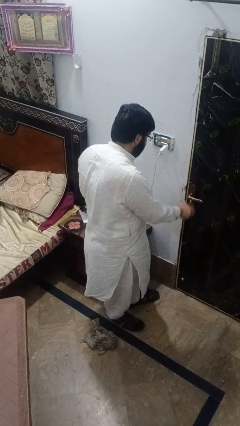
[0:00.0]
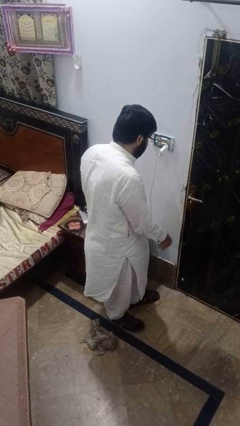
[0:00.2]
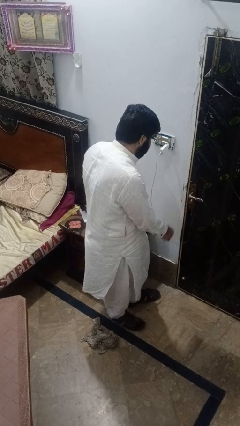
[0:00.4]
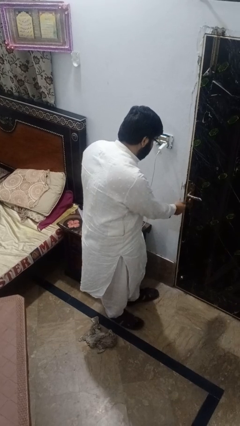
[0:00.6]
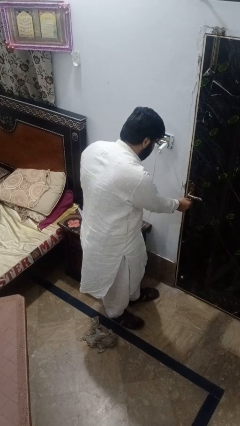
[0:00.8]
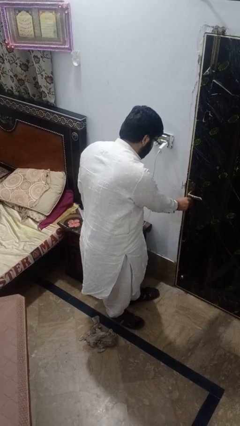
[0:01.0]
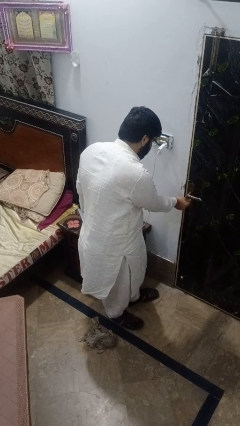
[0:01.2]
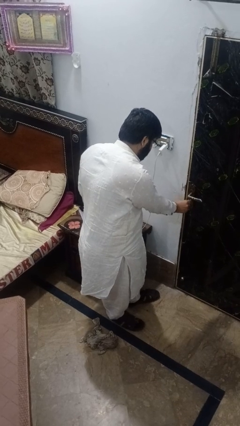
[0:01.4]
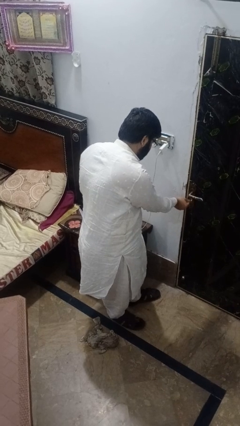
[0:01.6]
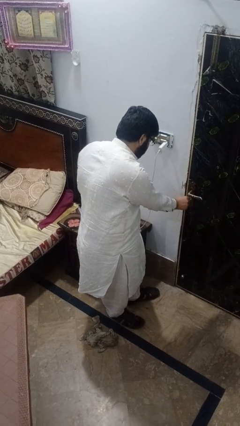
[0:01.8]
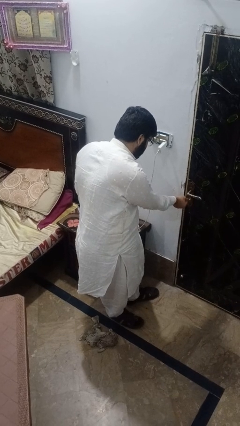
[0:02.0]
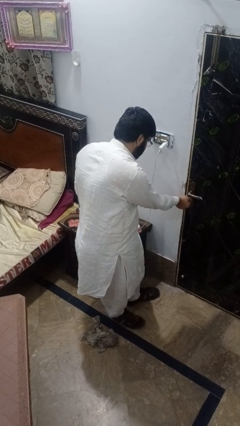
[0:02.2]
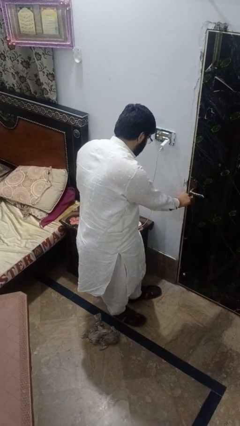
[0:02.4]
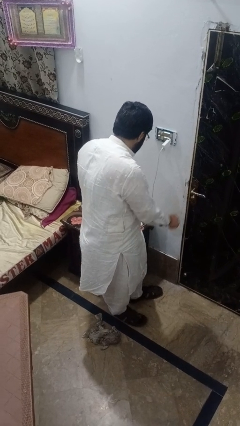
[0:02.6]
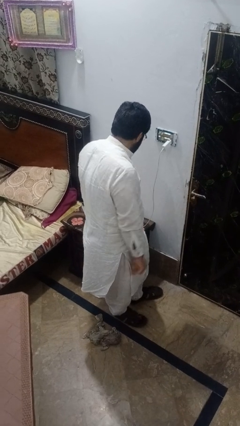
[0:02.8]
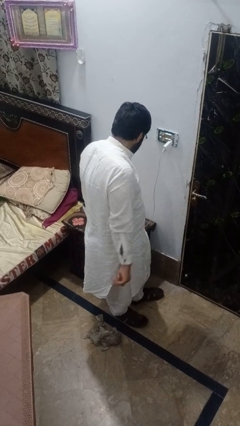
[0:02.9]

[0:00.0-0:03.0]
person locks door with keys

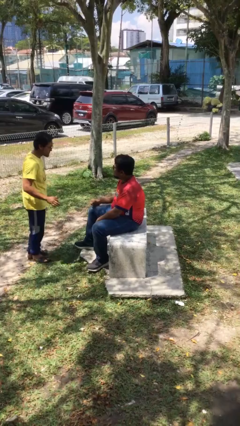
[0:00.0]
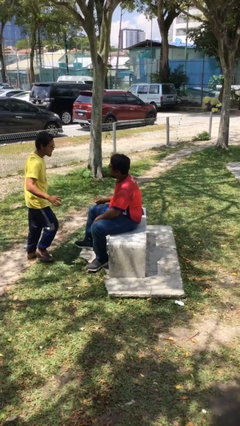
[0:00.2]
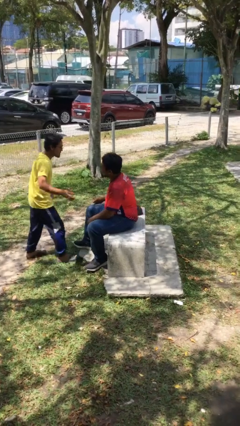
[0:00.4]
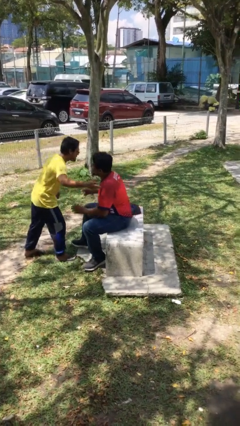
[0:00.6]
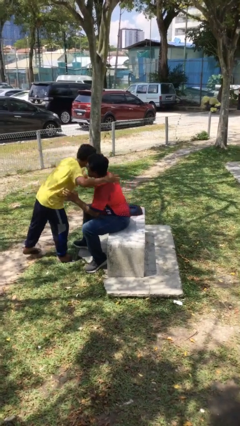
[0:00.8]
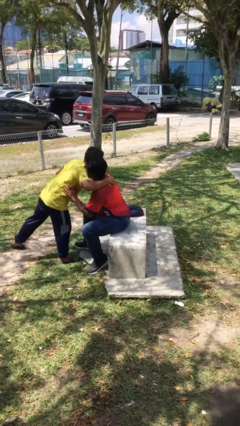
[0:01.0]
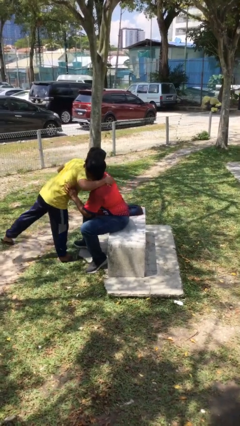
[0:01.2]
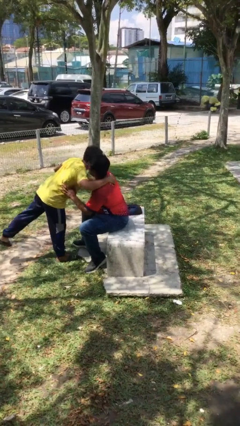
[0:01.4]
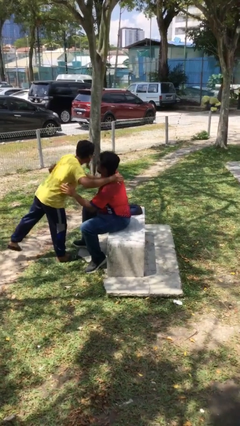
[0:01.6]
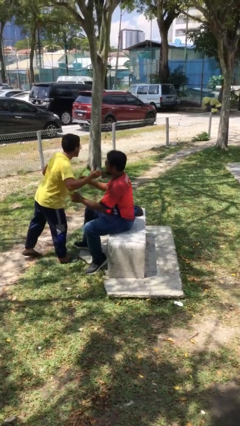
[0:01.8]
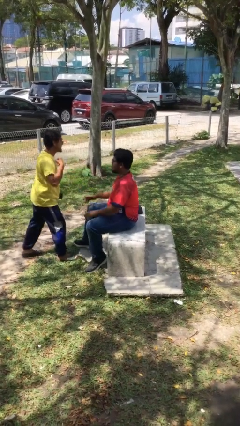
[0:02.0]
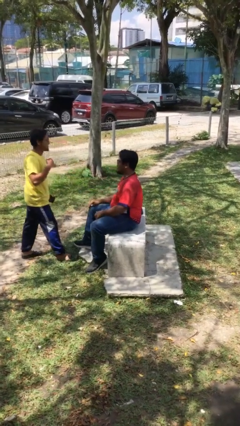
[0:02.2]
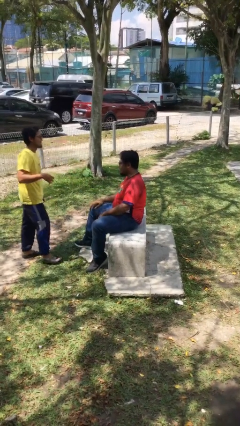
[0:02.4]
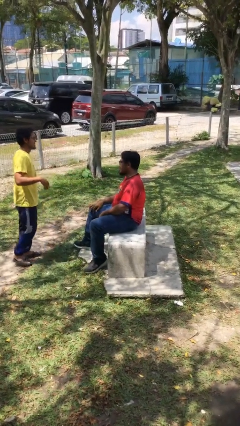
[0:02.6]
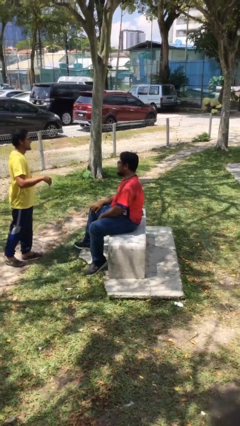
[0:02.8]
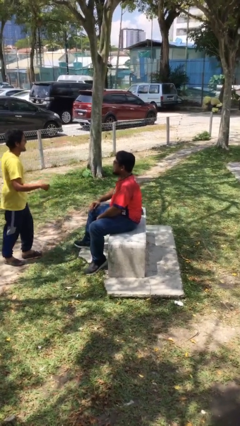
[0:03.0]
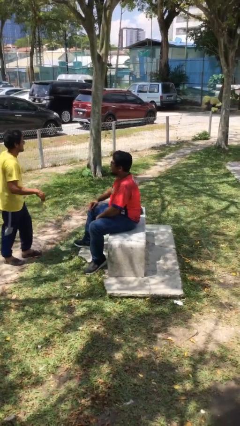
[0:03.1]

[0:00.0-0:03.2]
person embraces person

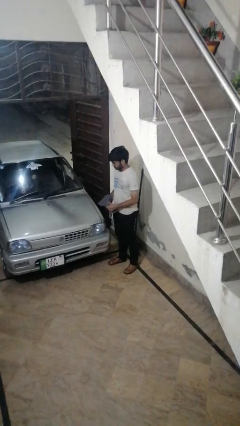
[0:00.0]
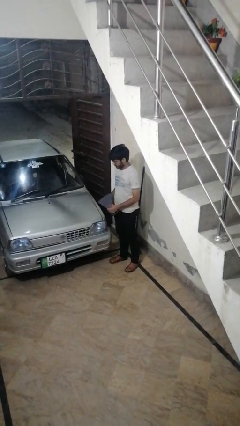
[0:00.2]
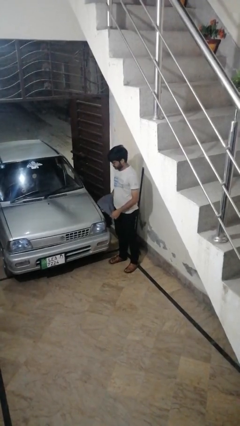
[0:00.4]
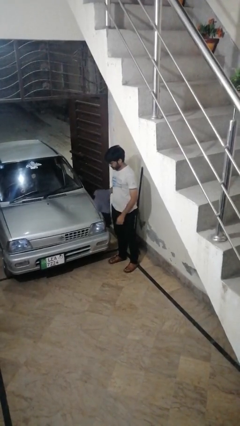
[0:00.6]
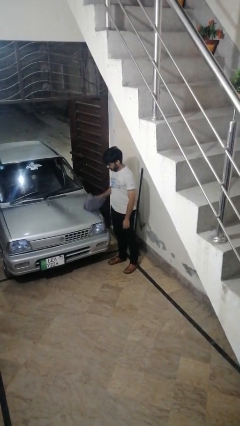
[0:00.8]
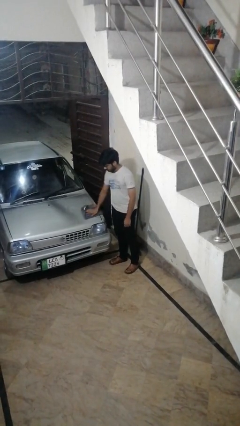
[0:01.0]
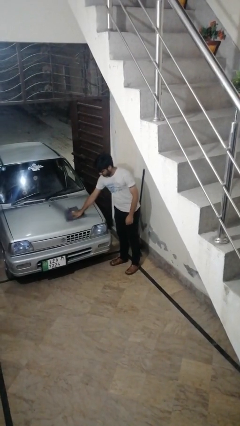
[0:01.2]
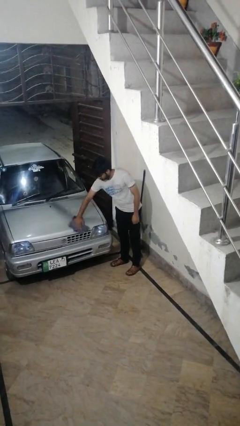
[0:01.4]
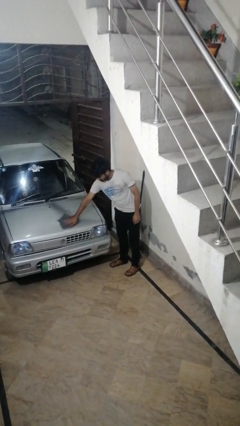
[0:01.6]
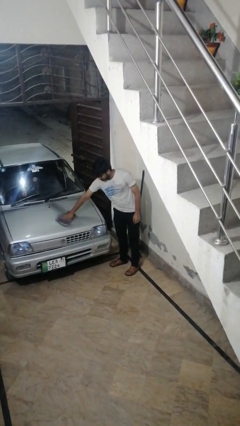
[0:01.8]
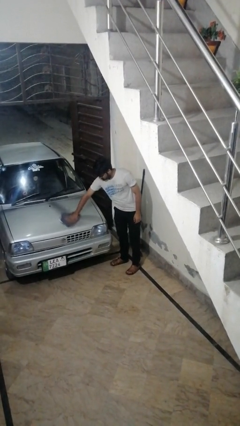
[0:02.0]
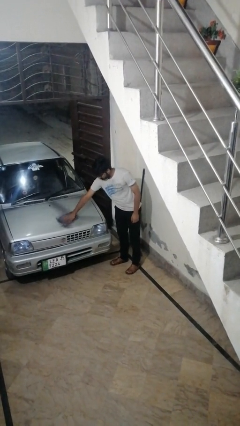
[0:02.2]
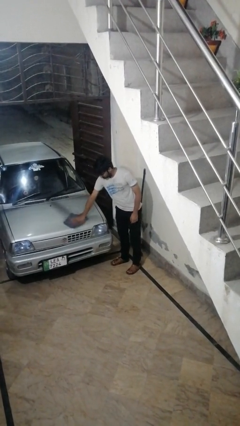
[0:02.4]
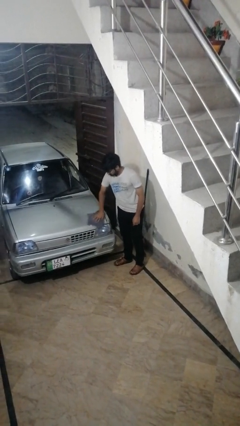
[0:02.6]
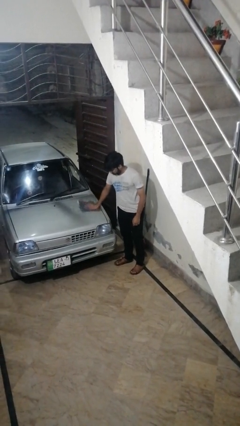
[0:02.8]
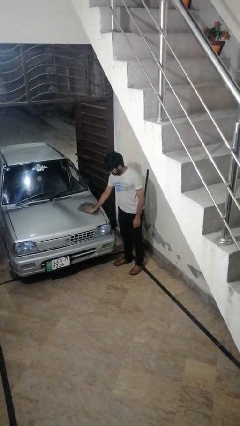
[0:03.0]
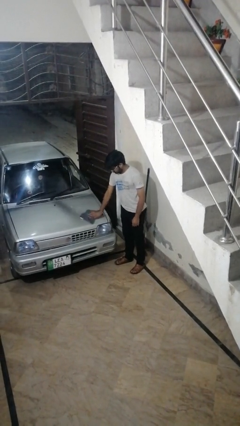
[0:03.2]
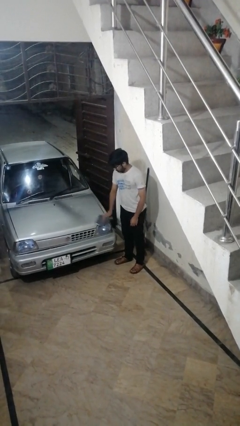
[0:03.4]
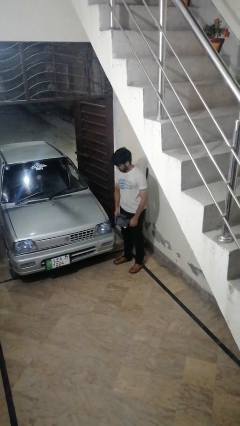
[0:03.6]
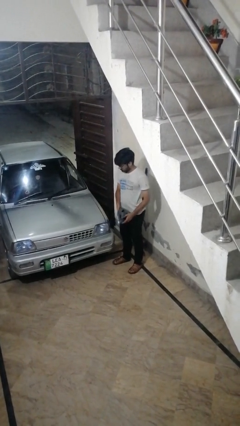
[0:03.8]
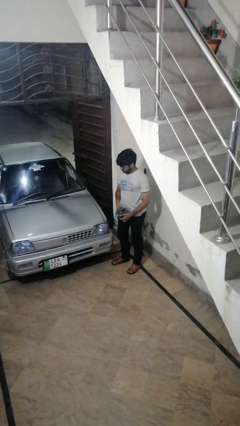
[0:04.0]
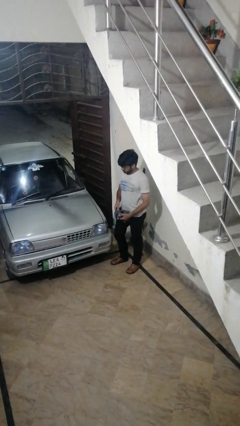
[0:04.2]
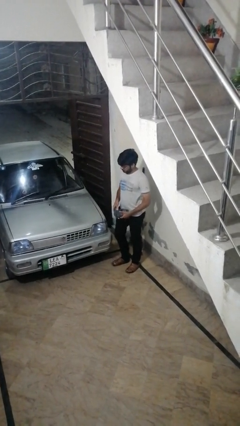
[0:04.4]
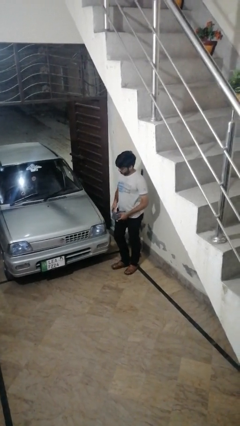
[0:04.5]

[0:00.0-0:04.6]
person polishes car with rag

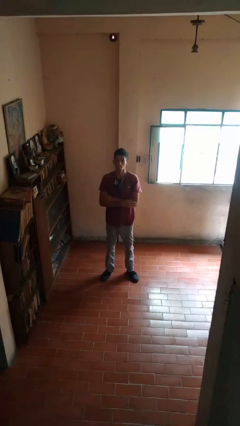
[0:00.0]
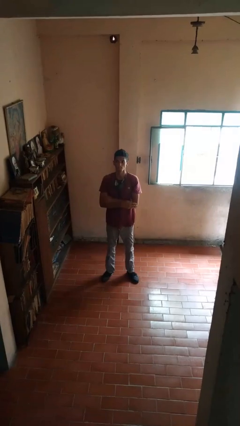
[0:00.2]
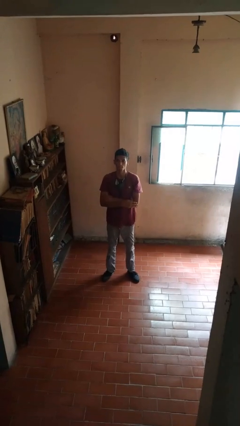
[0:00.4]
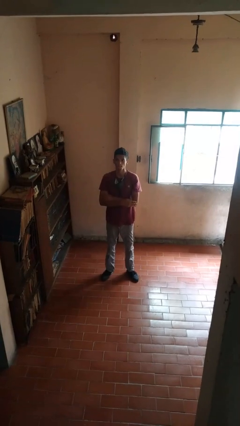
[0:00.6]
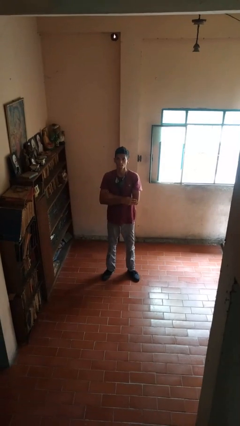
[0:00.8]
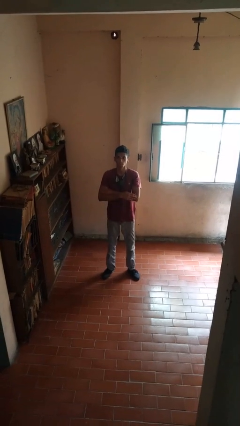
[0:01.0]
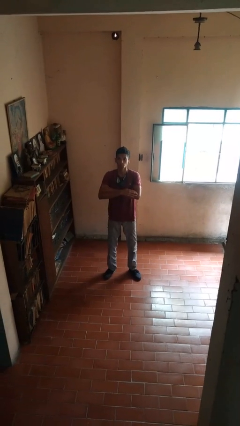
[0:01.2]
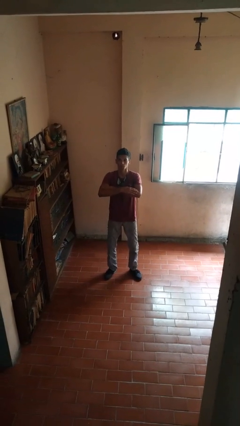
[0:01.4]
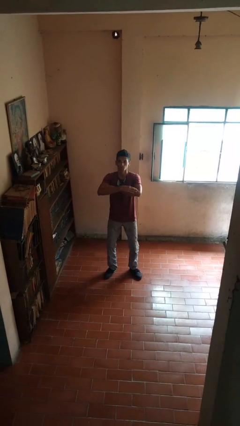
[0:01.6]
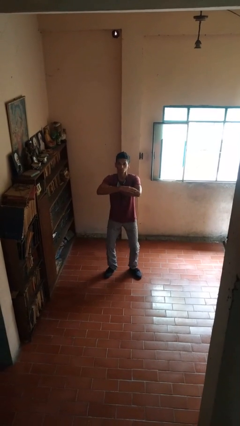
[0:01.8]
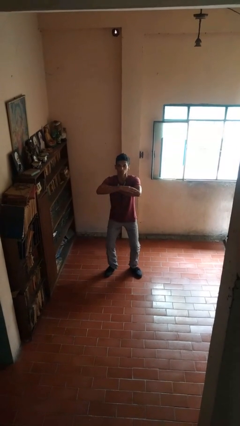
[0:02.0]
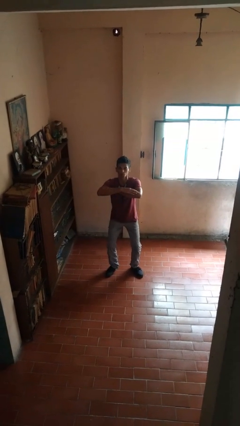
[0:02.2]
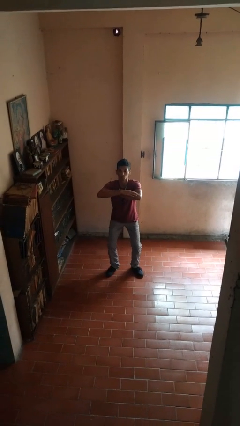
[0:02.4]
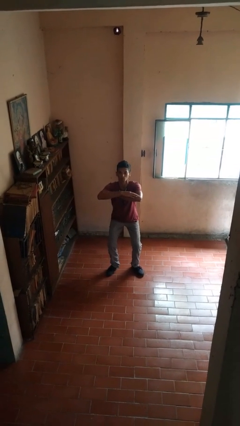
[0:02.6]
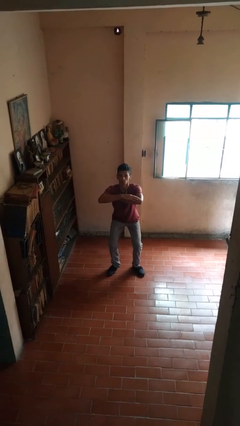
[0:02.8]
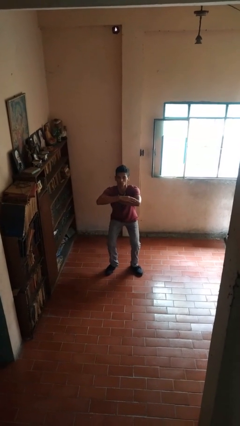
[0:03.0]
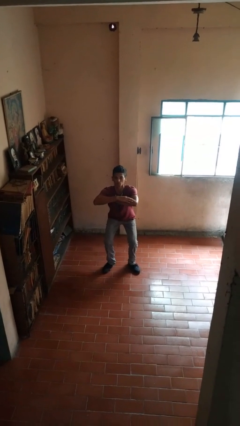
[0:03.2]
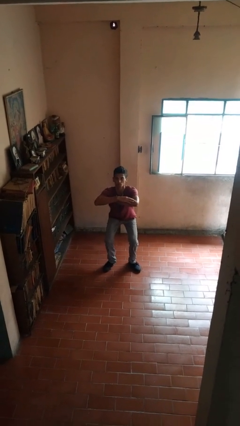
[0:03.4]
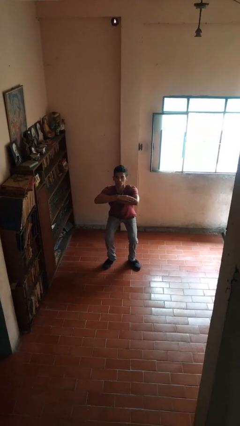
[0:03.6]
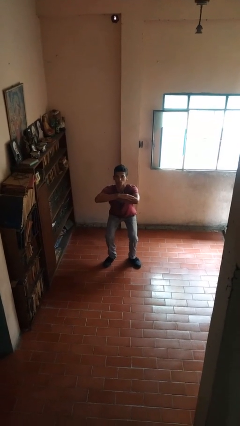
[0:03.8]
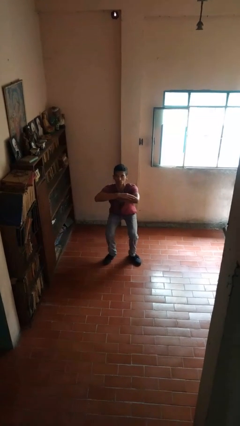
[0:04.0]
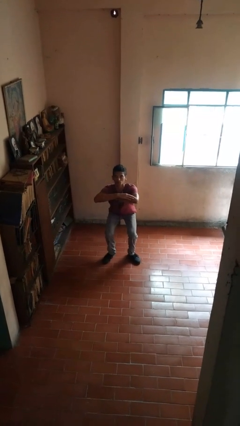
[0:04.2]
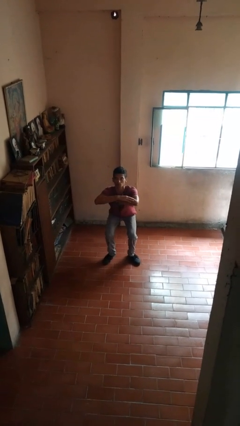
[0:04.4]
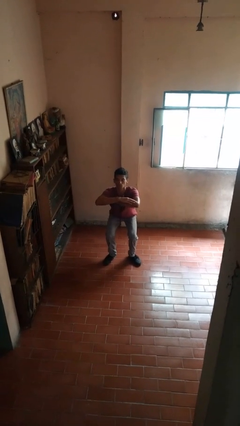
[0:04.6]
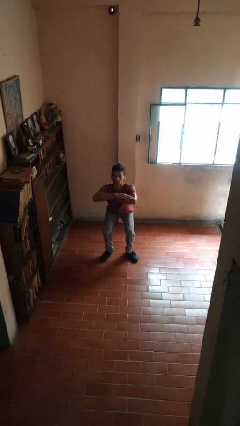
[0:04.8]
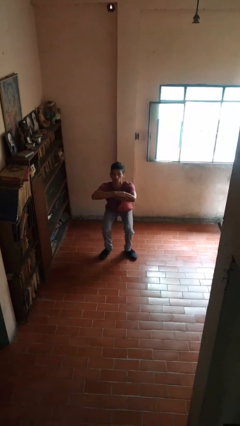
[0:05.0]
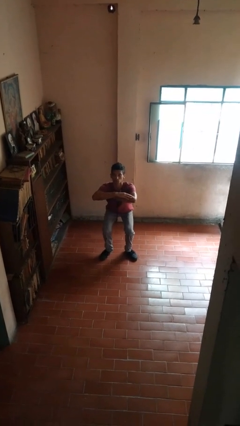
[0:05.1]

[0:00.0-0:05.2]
person squats

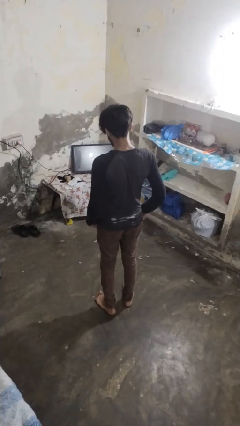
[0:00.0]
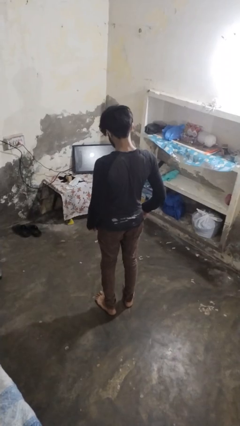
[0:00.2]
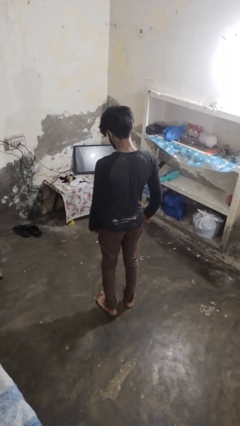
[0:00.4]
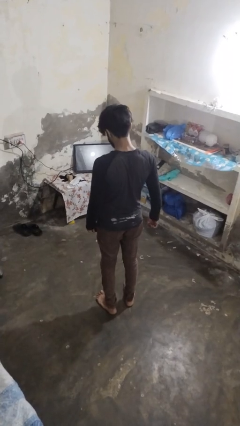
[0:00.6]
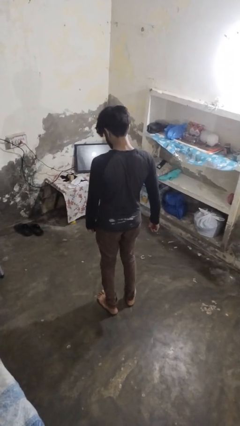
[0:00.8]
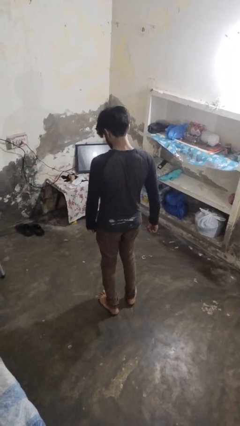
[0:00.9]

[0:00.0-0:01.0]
person kneels

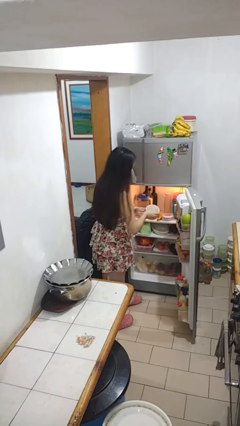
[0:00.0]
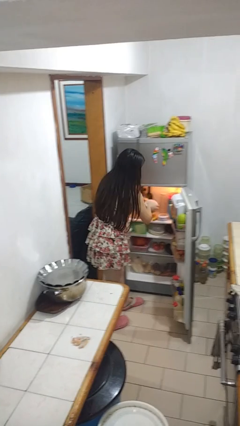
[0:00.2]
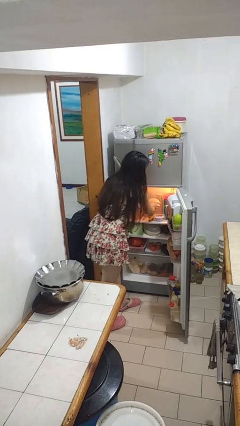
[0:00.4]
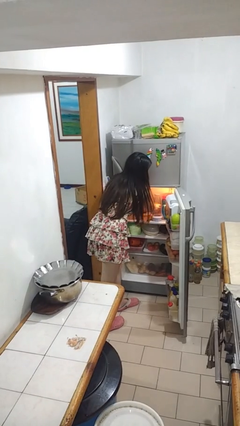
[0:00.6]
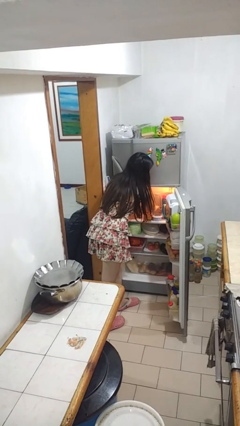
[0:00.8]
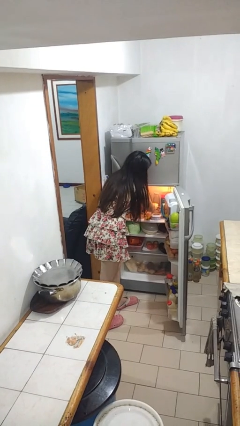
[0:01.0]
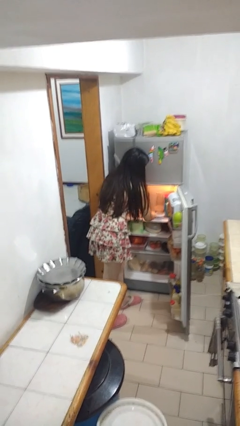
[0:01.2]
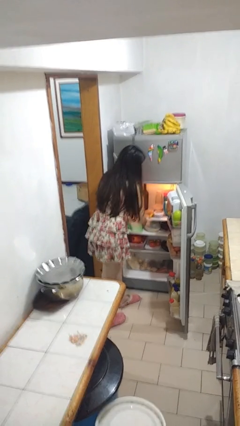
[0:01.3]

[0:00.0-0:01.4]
person puts object into refrigerator
